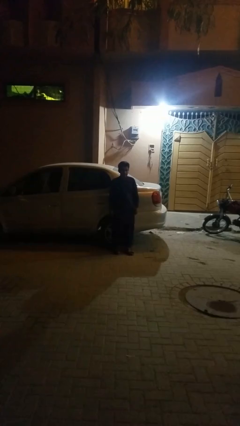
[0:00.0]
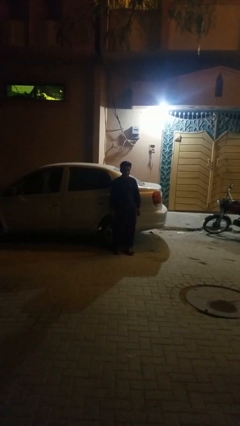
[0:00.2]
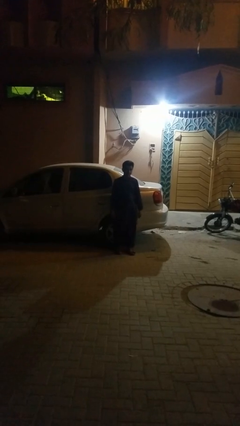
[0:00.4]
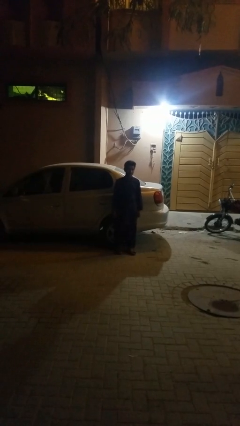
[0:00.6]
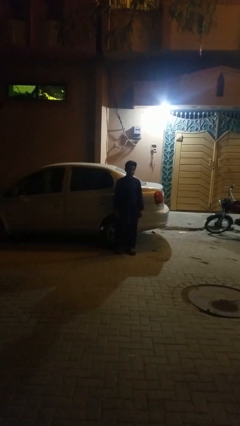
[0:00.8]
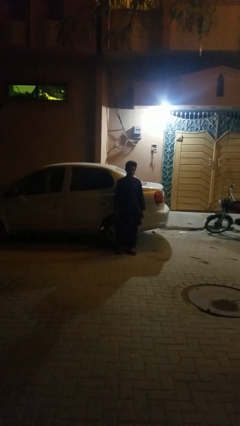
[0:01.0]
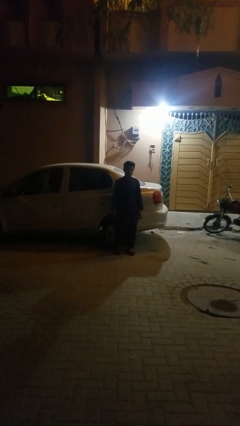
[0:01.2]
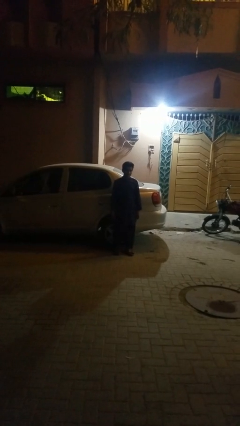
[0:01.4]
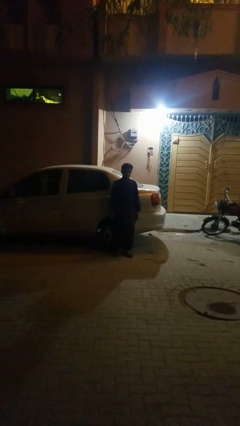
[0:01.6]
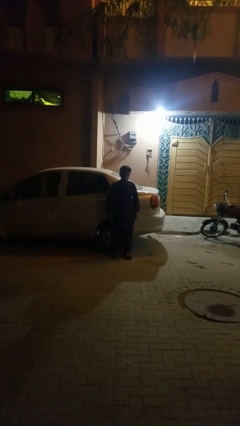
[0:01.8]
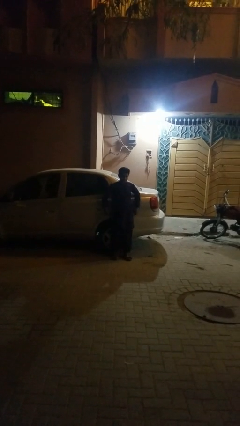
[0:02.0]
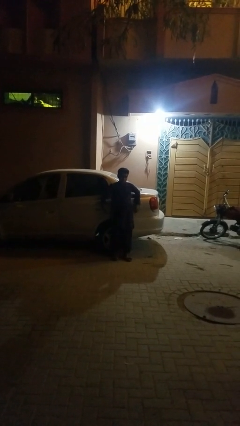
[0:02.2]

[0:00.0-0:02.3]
person leans against car

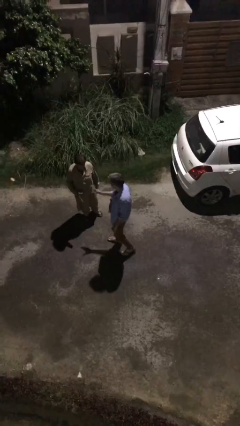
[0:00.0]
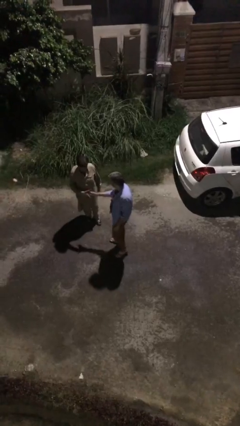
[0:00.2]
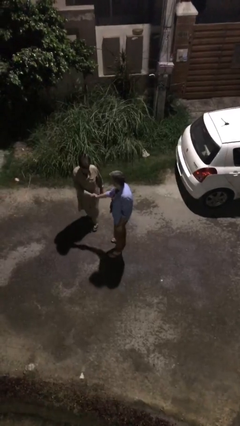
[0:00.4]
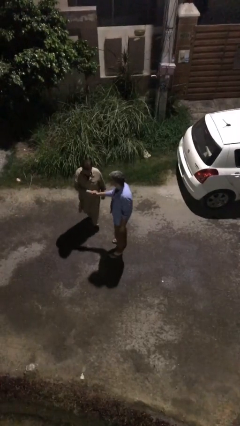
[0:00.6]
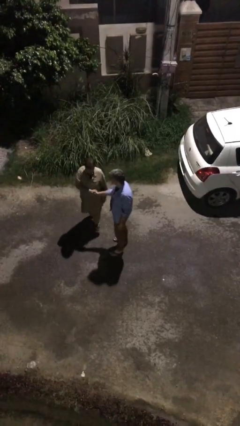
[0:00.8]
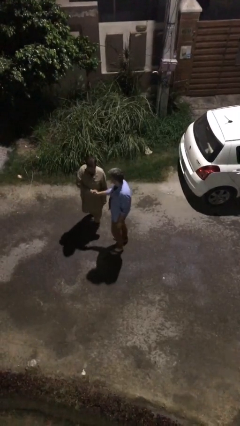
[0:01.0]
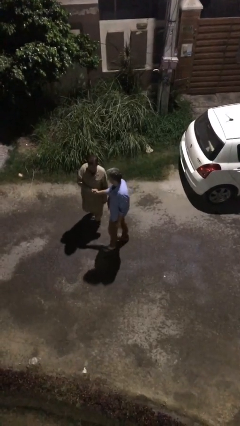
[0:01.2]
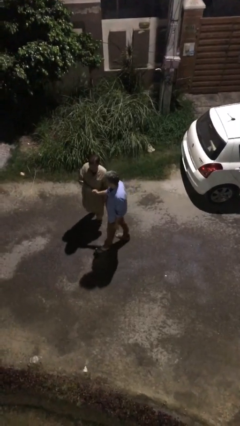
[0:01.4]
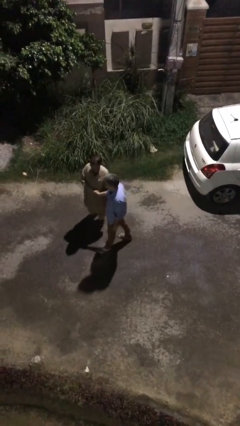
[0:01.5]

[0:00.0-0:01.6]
person shakes hand

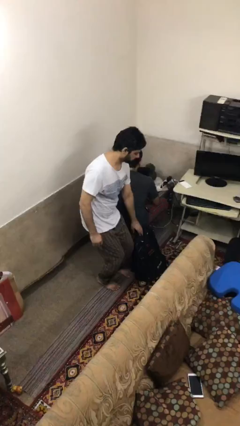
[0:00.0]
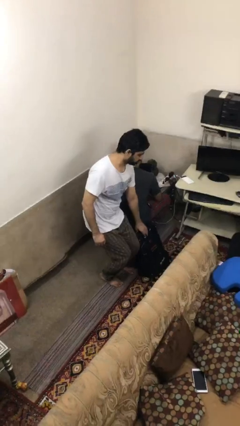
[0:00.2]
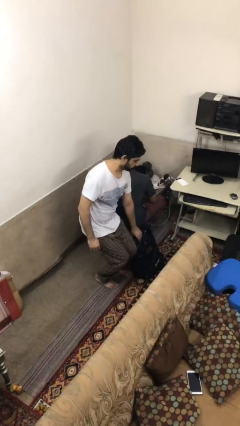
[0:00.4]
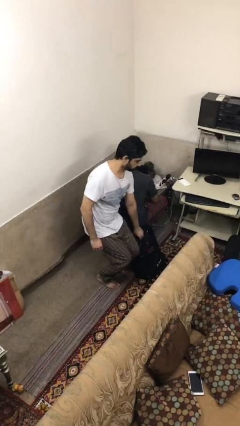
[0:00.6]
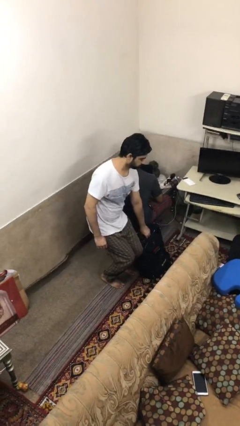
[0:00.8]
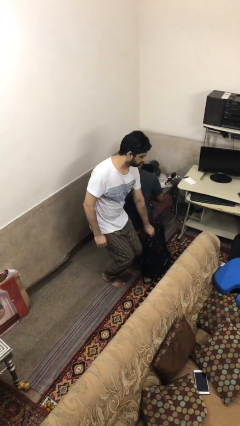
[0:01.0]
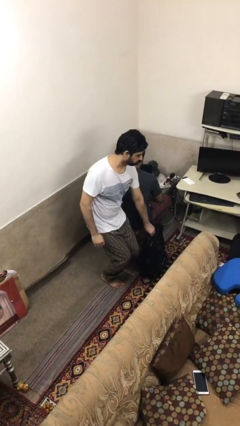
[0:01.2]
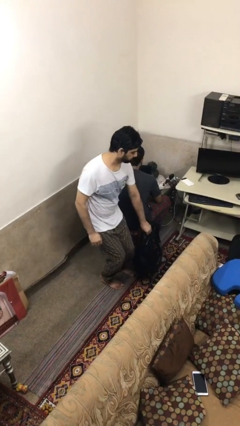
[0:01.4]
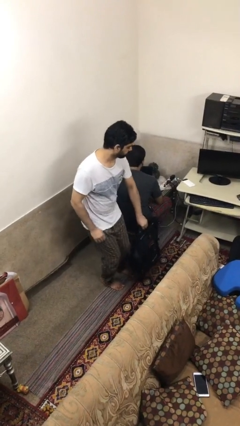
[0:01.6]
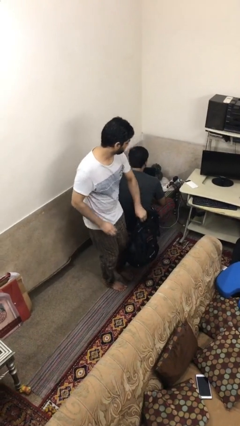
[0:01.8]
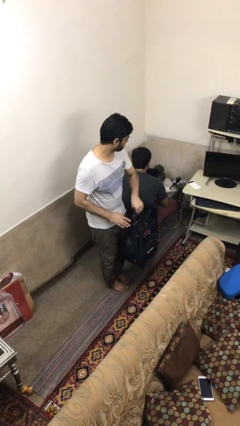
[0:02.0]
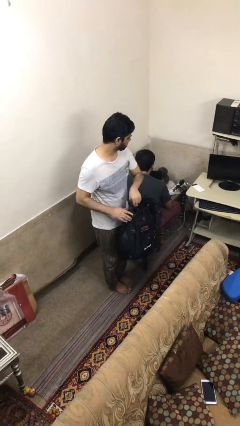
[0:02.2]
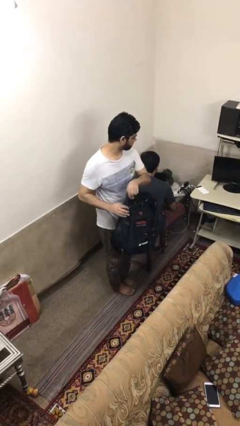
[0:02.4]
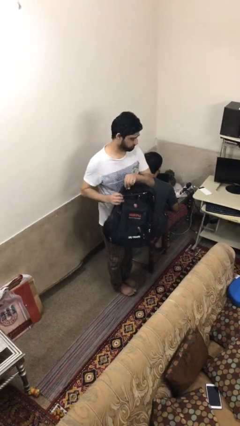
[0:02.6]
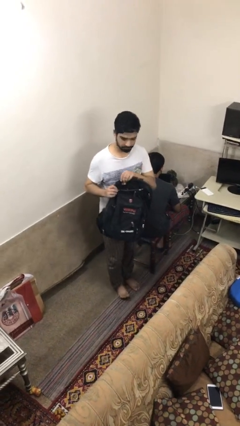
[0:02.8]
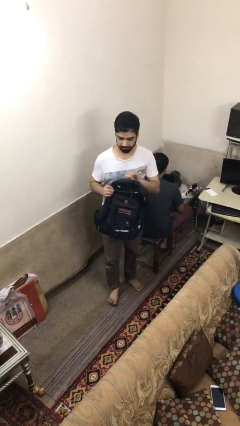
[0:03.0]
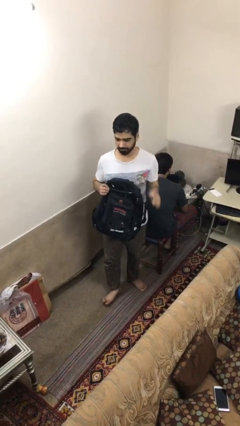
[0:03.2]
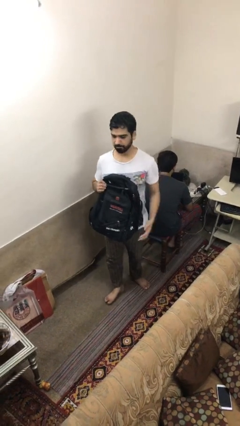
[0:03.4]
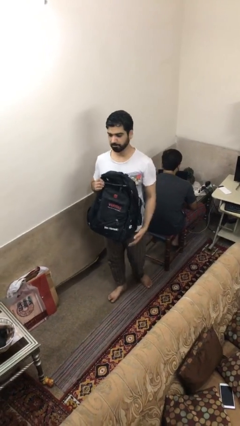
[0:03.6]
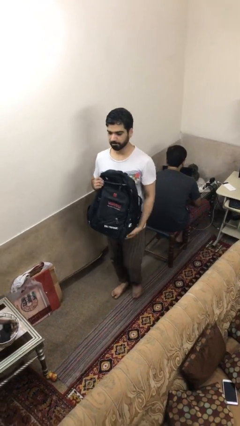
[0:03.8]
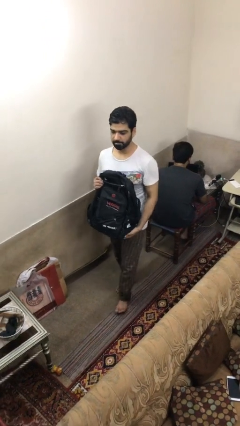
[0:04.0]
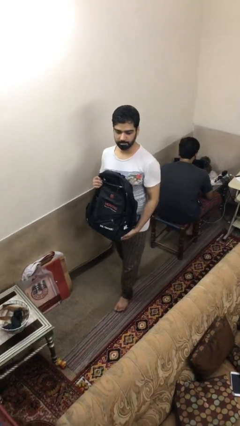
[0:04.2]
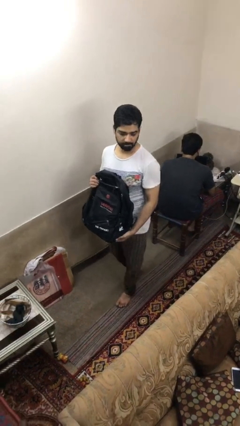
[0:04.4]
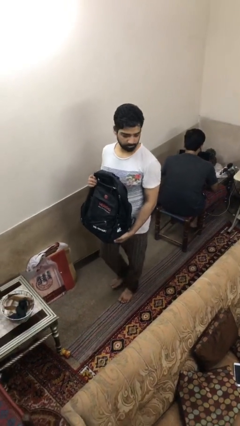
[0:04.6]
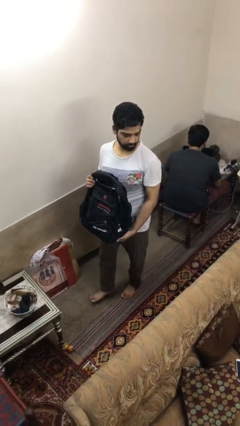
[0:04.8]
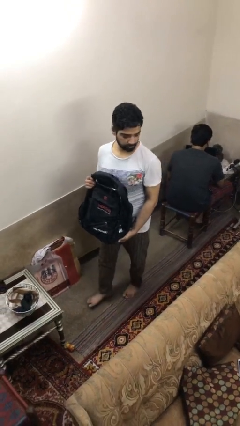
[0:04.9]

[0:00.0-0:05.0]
person steals object from person

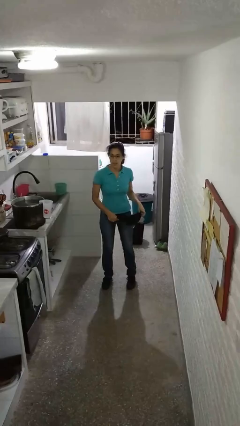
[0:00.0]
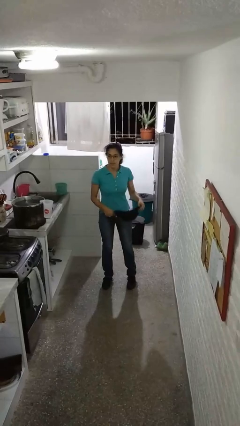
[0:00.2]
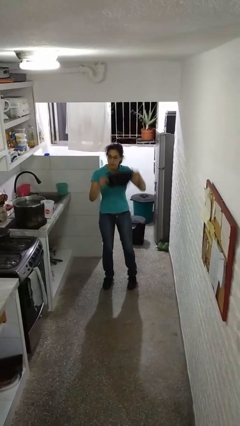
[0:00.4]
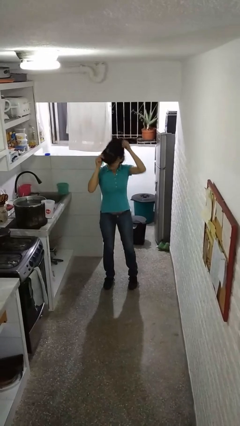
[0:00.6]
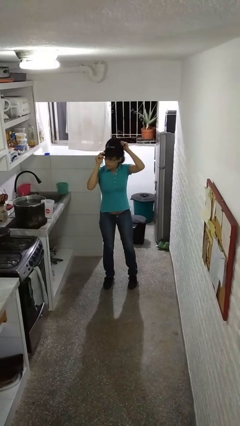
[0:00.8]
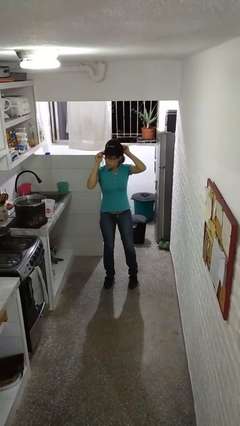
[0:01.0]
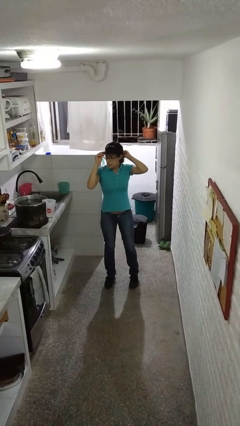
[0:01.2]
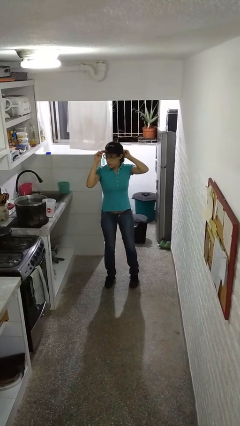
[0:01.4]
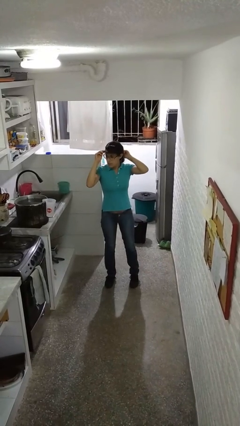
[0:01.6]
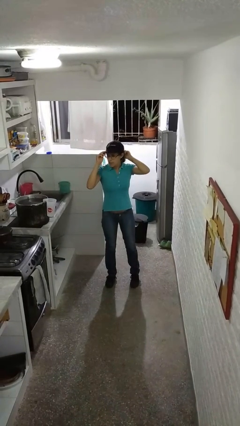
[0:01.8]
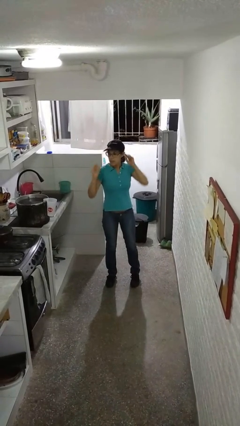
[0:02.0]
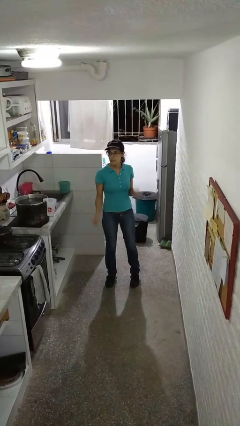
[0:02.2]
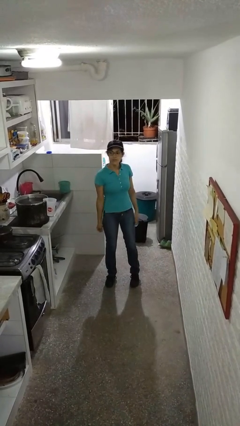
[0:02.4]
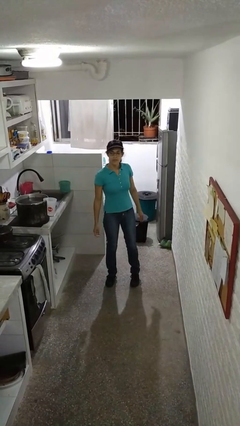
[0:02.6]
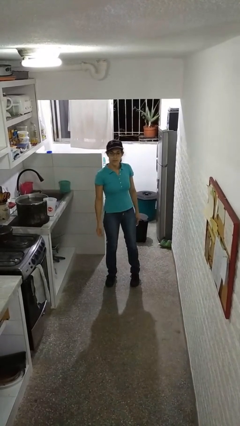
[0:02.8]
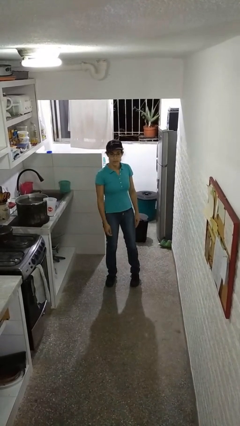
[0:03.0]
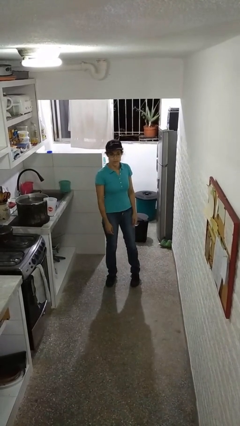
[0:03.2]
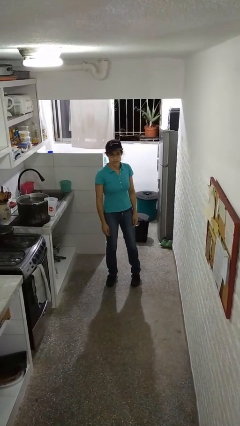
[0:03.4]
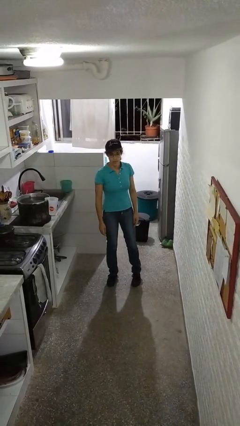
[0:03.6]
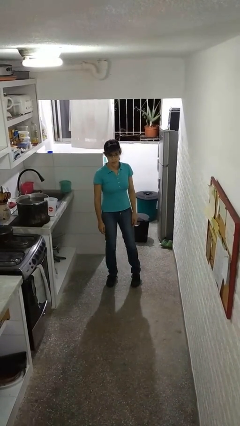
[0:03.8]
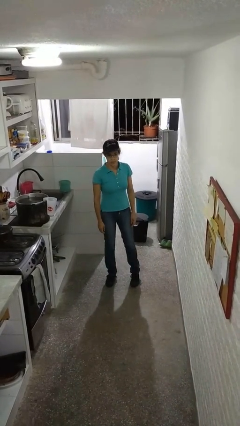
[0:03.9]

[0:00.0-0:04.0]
person puts on hat

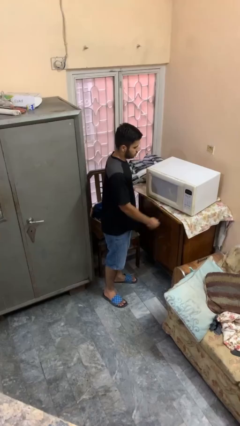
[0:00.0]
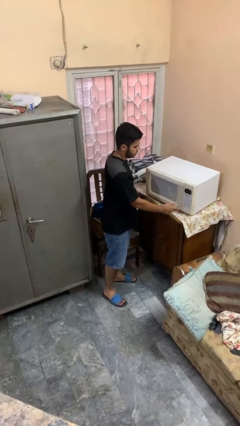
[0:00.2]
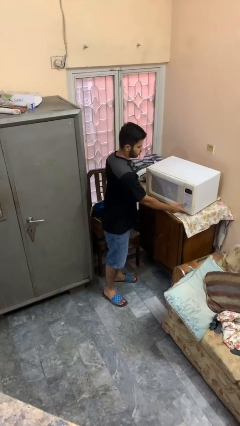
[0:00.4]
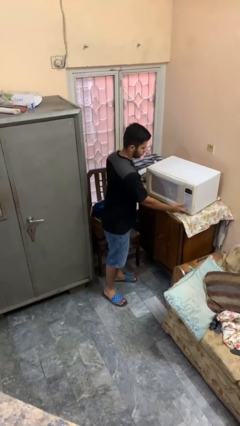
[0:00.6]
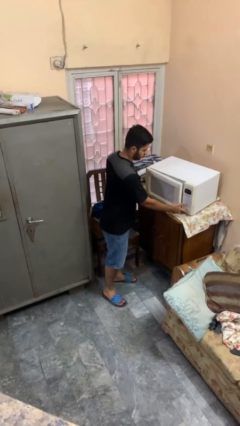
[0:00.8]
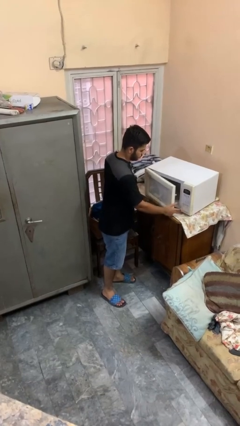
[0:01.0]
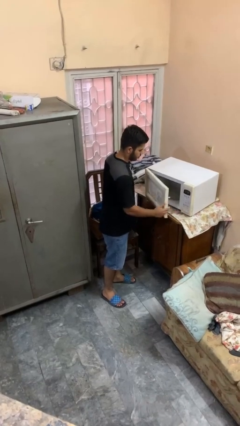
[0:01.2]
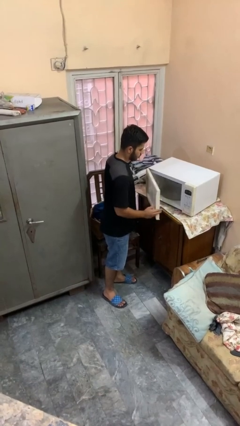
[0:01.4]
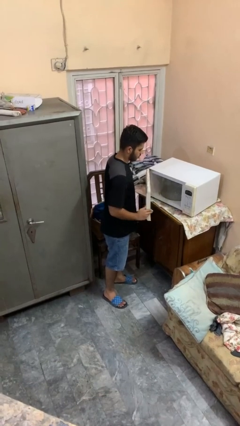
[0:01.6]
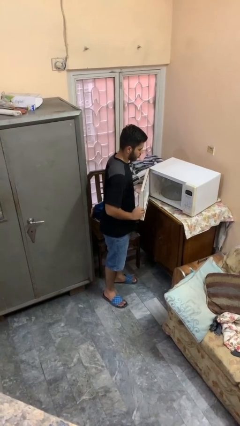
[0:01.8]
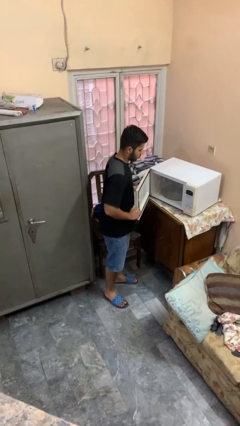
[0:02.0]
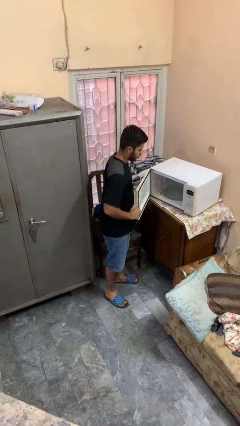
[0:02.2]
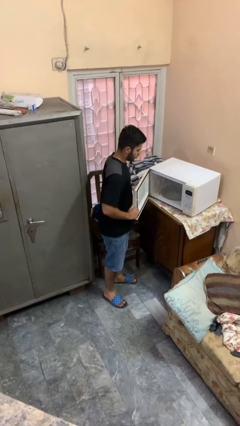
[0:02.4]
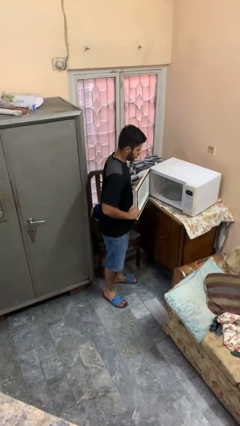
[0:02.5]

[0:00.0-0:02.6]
person opens microwave

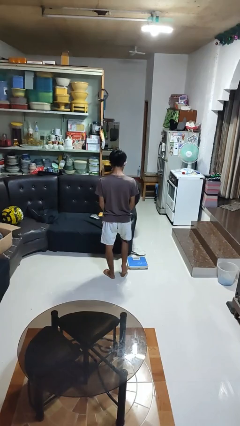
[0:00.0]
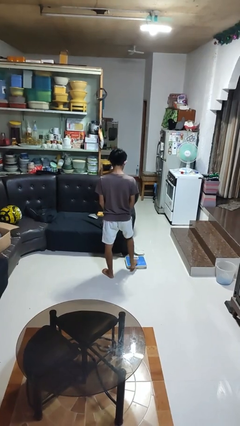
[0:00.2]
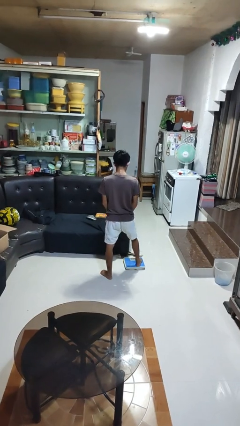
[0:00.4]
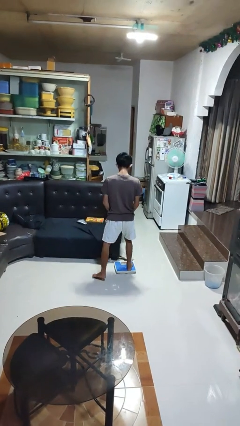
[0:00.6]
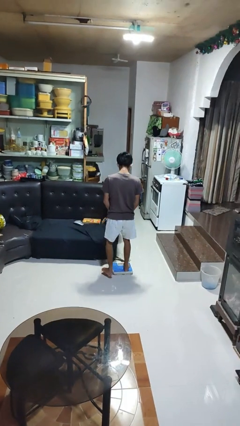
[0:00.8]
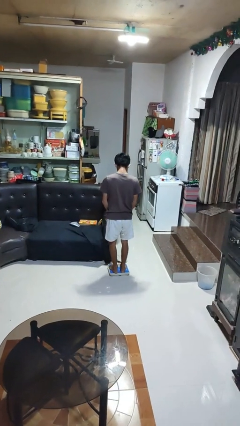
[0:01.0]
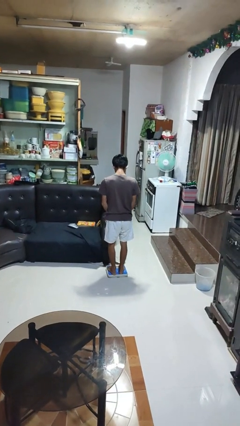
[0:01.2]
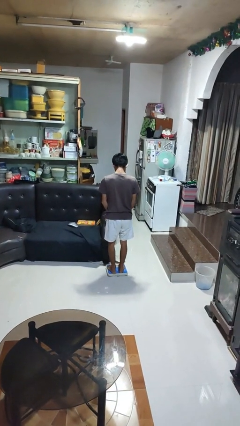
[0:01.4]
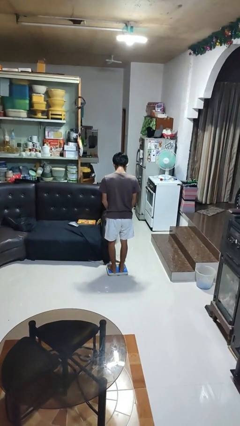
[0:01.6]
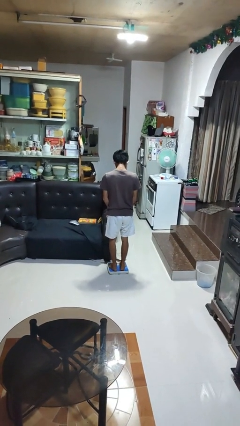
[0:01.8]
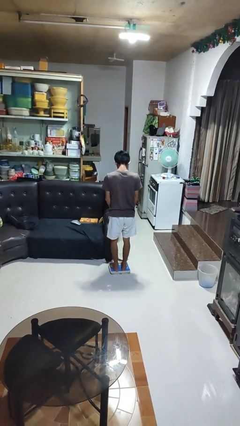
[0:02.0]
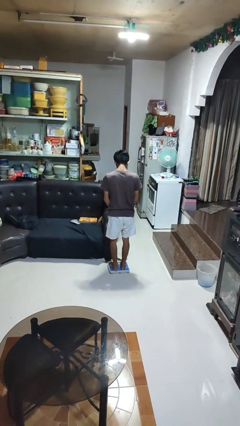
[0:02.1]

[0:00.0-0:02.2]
person uses bodyweight scale
